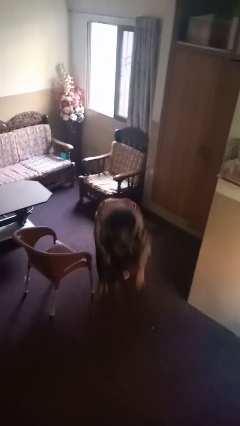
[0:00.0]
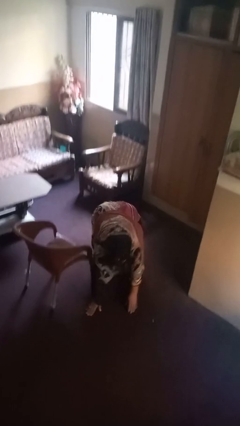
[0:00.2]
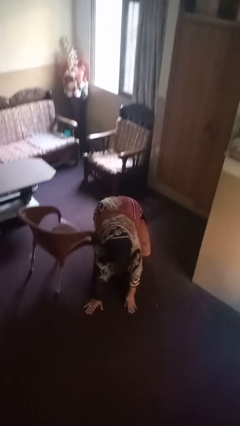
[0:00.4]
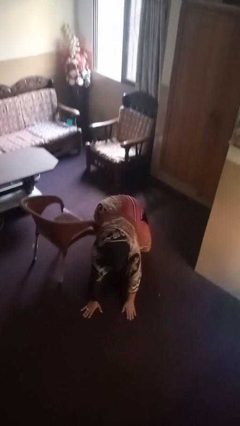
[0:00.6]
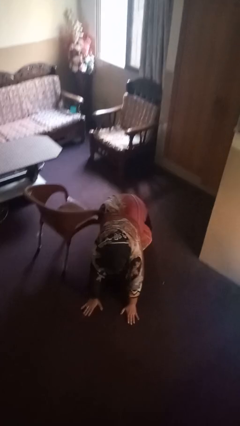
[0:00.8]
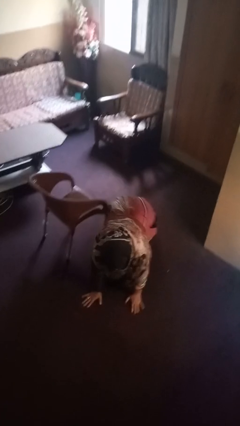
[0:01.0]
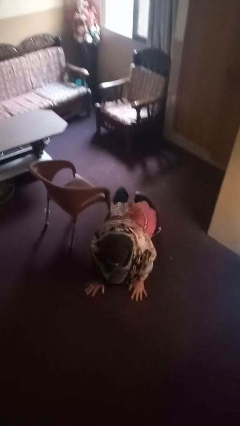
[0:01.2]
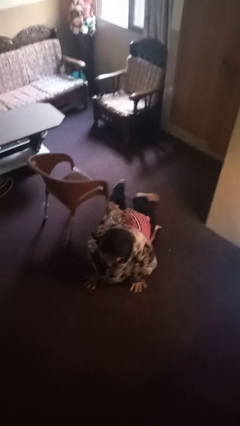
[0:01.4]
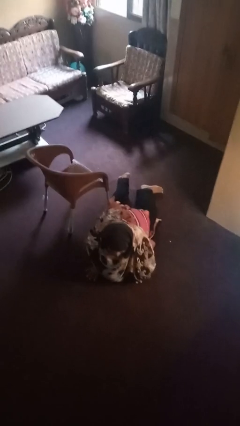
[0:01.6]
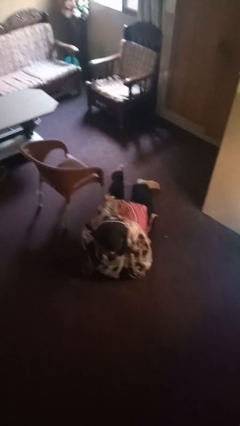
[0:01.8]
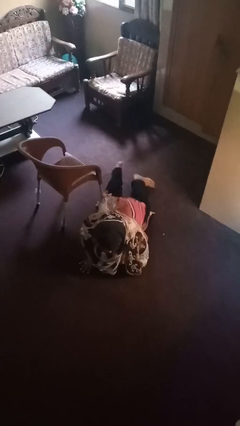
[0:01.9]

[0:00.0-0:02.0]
person lies down on floor

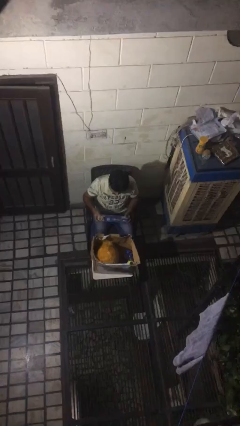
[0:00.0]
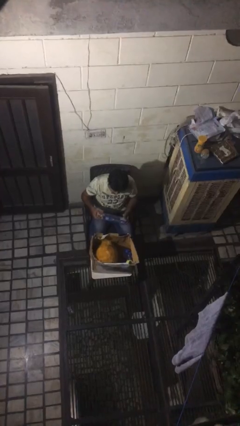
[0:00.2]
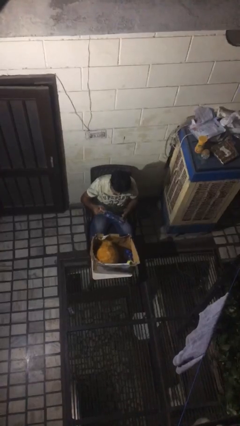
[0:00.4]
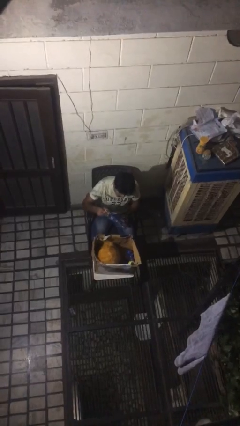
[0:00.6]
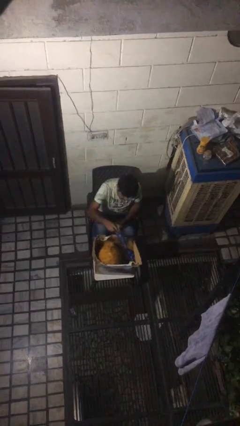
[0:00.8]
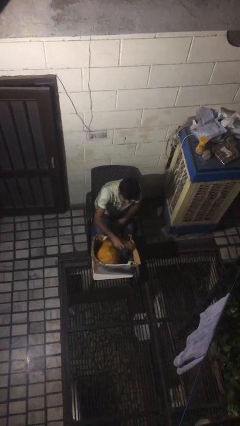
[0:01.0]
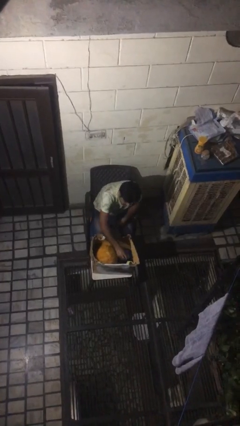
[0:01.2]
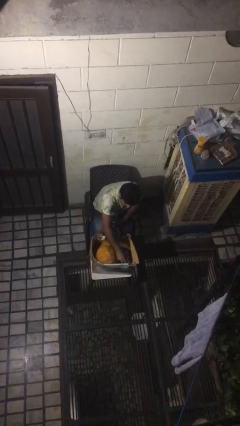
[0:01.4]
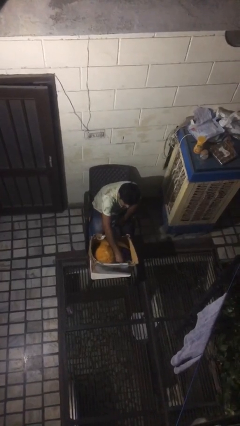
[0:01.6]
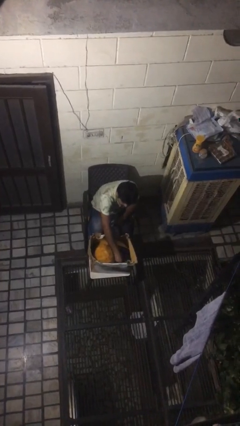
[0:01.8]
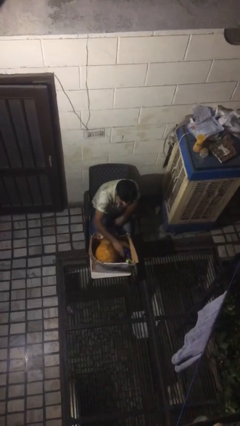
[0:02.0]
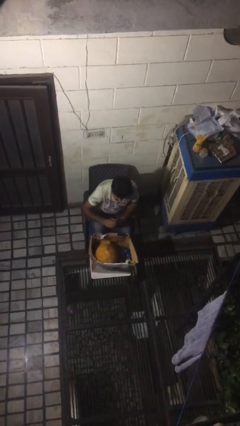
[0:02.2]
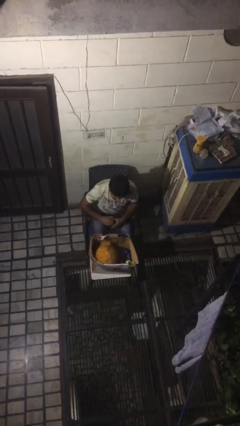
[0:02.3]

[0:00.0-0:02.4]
person puts object into box

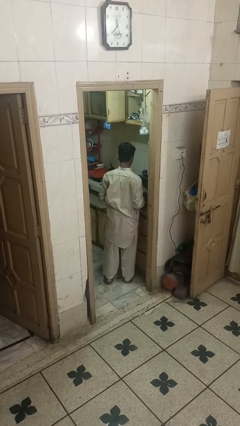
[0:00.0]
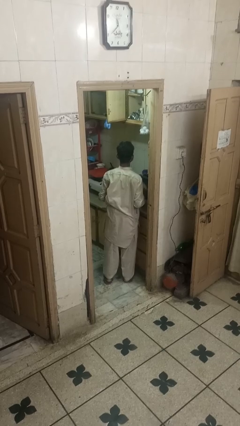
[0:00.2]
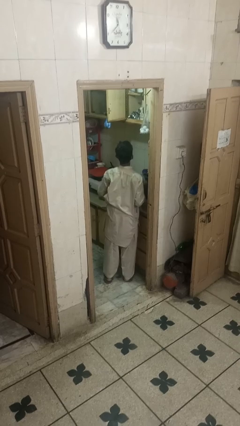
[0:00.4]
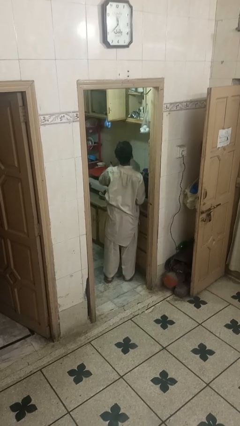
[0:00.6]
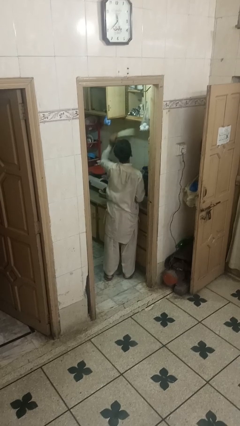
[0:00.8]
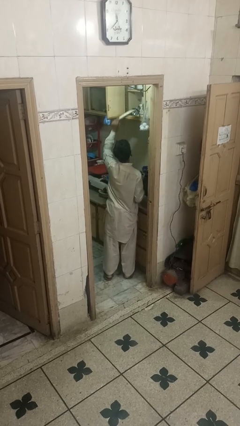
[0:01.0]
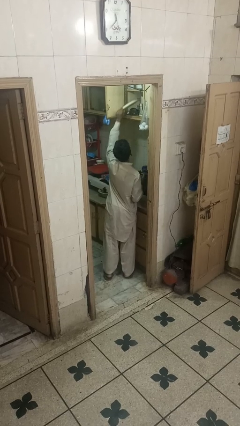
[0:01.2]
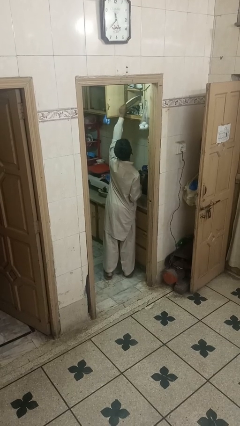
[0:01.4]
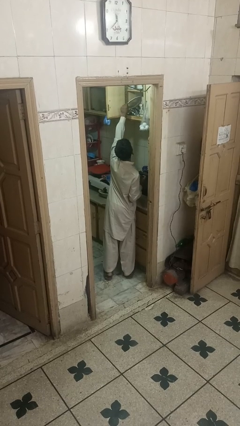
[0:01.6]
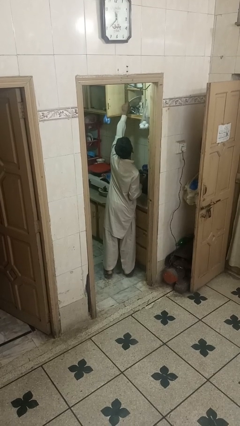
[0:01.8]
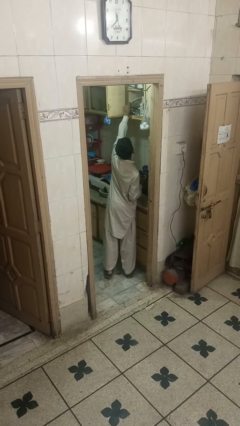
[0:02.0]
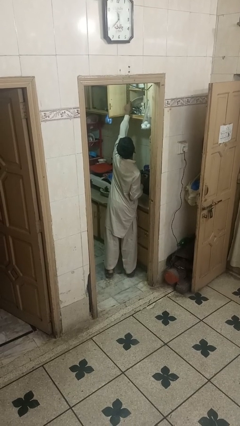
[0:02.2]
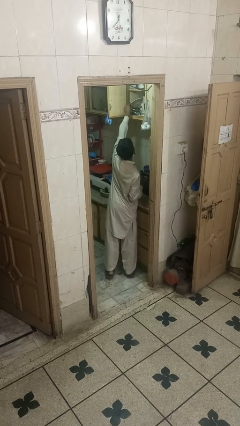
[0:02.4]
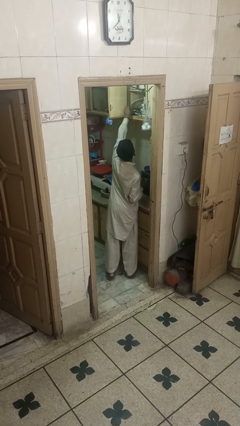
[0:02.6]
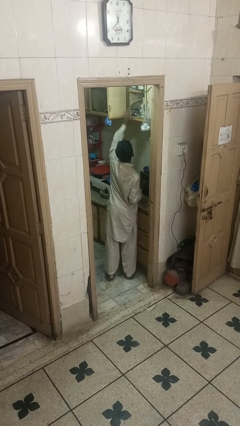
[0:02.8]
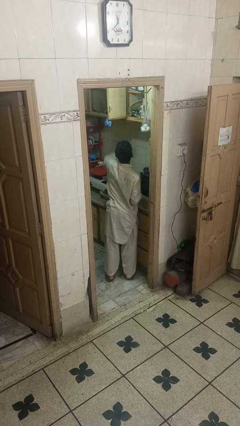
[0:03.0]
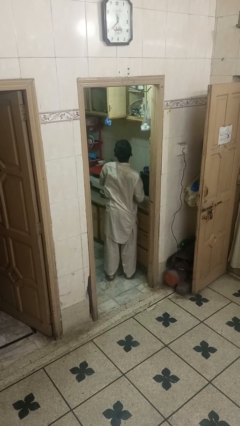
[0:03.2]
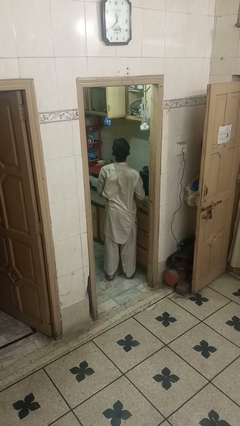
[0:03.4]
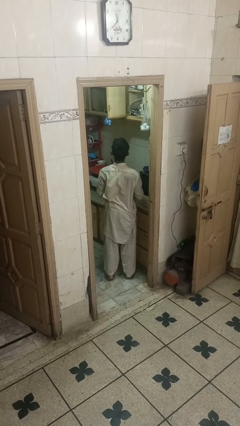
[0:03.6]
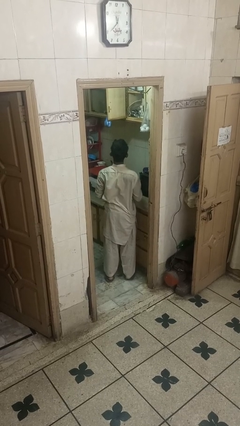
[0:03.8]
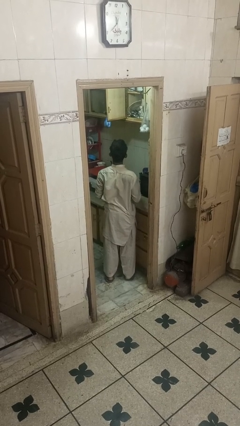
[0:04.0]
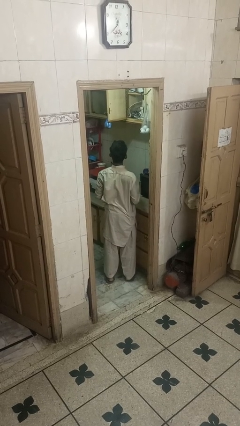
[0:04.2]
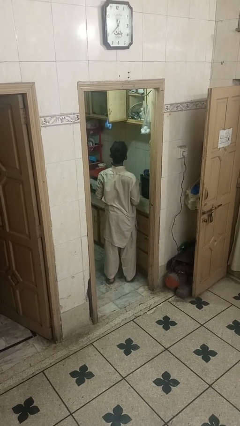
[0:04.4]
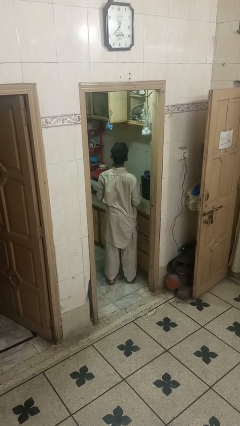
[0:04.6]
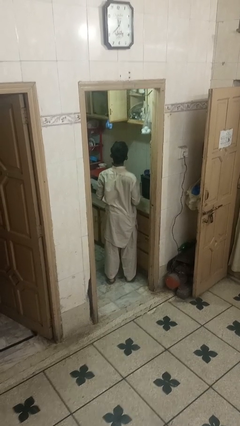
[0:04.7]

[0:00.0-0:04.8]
person puts object in cabinet

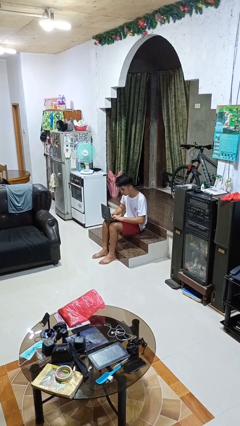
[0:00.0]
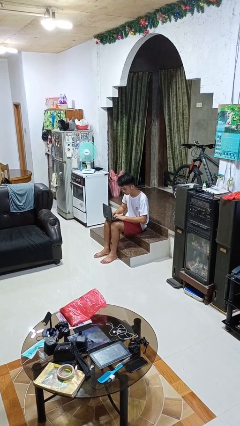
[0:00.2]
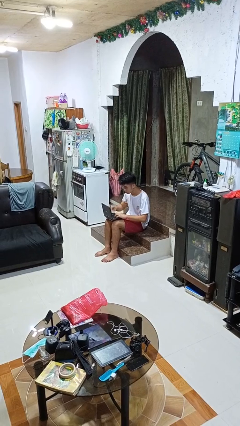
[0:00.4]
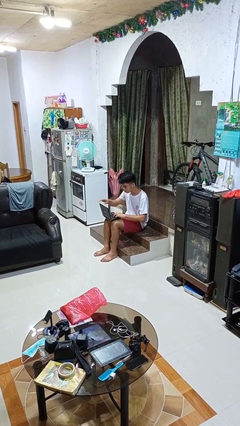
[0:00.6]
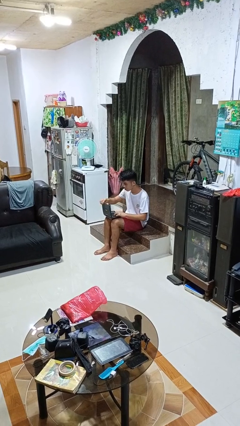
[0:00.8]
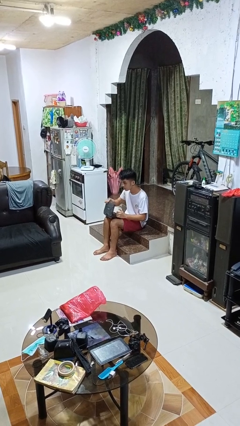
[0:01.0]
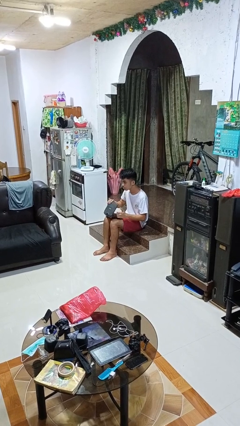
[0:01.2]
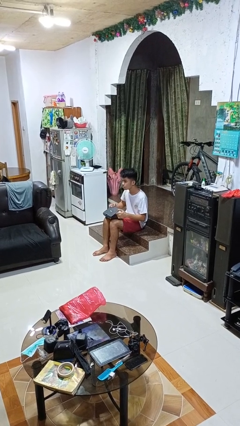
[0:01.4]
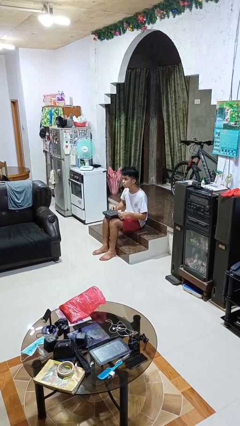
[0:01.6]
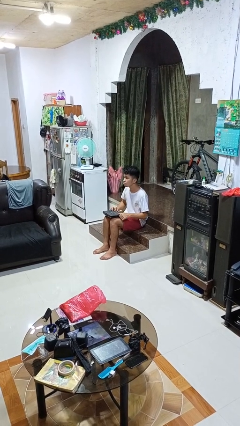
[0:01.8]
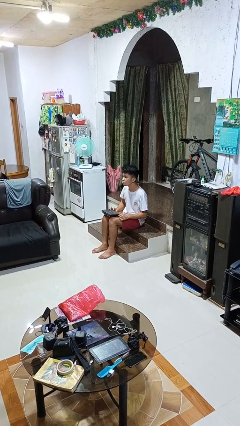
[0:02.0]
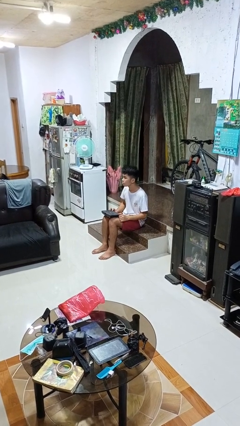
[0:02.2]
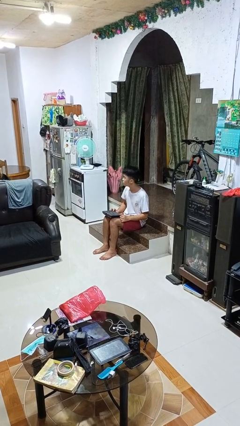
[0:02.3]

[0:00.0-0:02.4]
person closes laptop

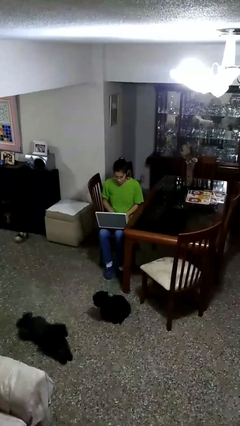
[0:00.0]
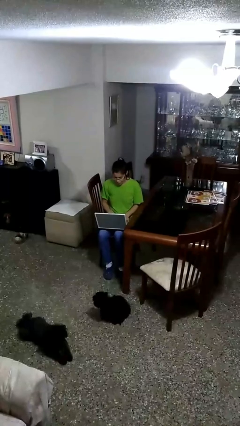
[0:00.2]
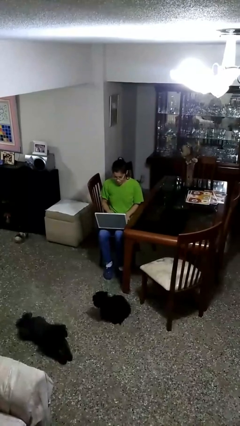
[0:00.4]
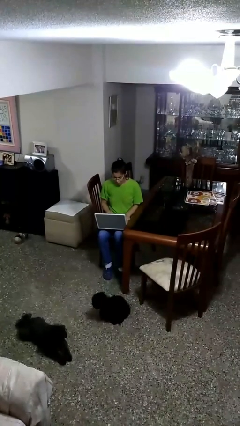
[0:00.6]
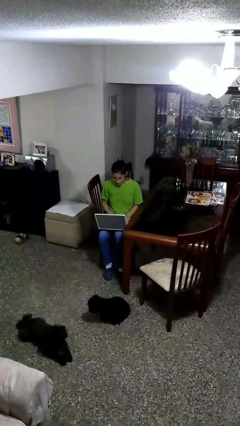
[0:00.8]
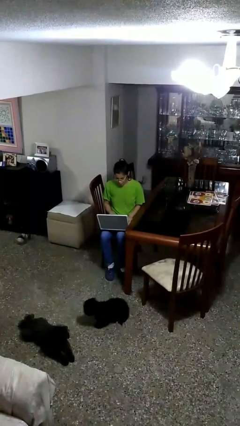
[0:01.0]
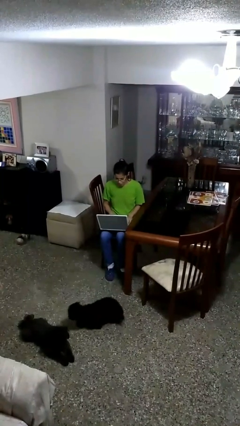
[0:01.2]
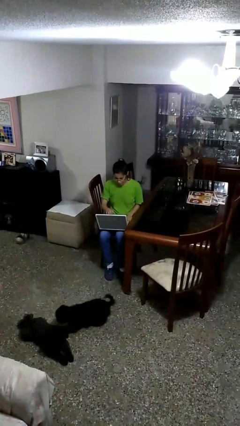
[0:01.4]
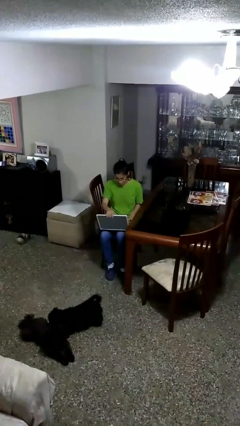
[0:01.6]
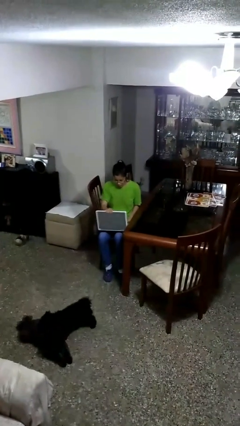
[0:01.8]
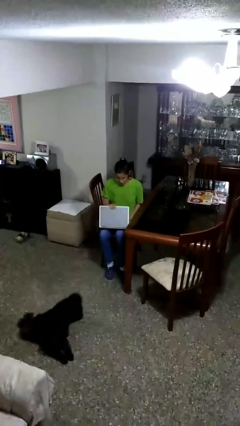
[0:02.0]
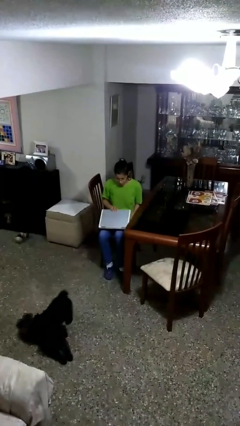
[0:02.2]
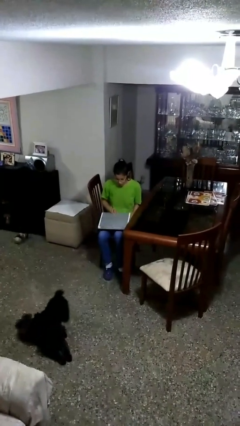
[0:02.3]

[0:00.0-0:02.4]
person interacts with laptop

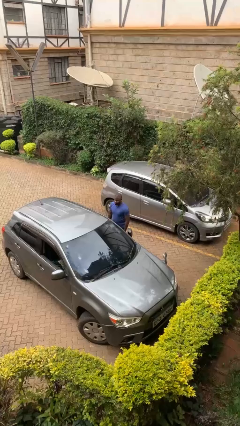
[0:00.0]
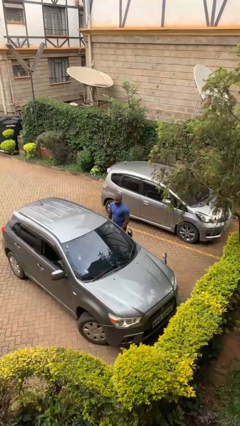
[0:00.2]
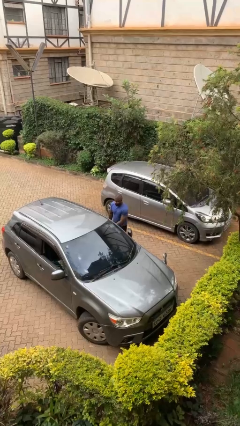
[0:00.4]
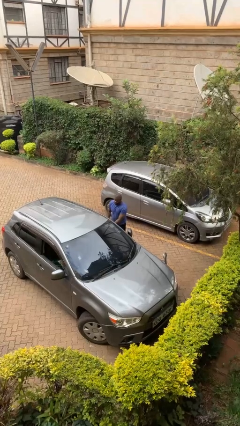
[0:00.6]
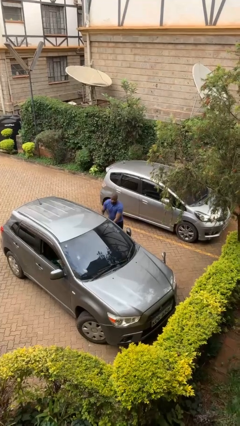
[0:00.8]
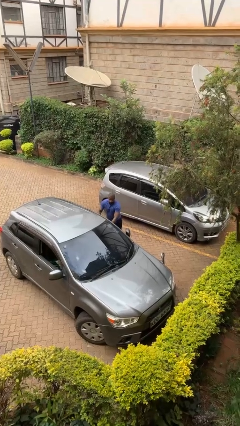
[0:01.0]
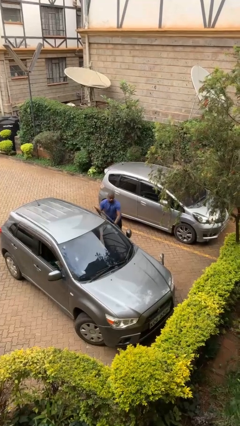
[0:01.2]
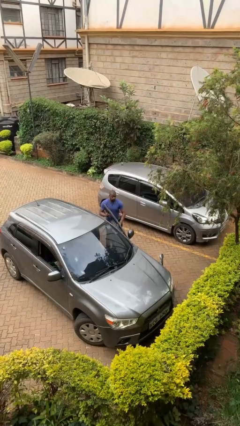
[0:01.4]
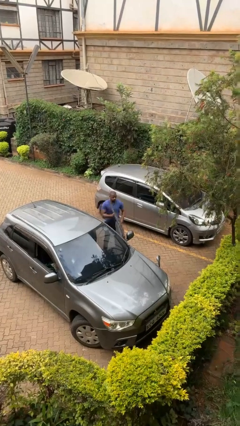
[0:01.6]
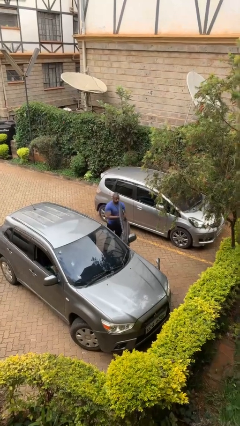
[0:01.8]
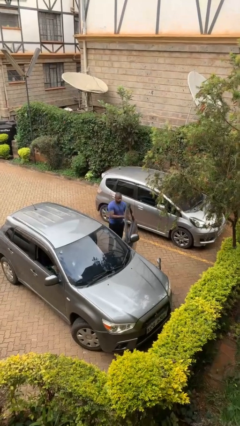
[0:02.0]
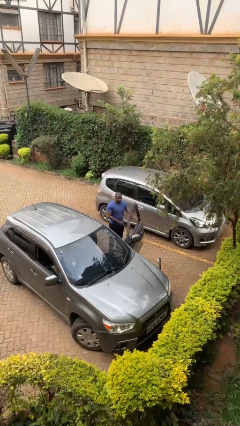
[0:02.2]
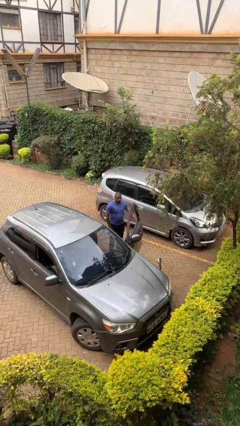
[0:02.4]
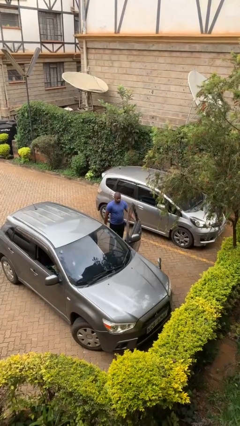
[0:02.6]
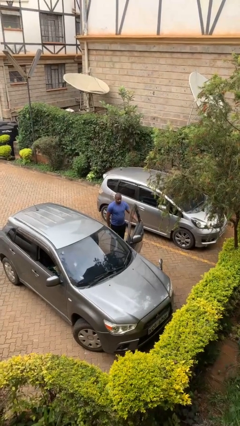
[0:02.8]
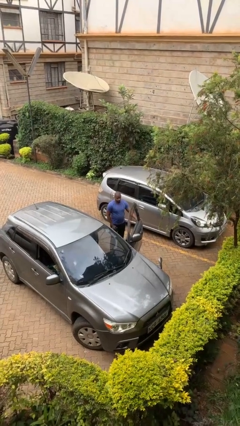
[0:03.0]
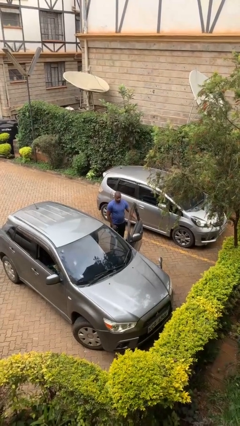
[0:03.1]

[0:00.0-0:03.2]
person opens car door
